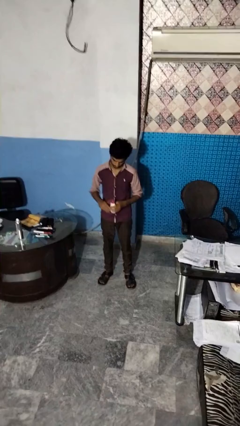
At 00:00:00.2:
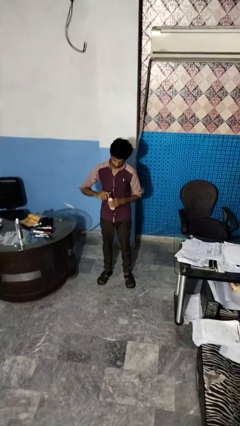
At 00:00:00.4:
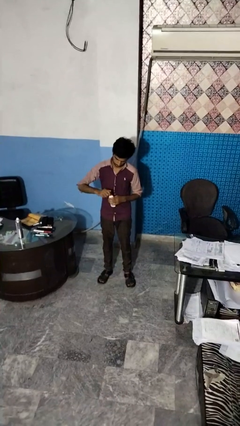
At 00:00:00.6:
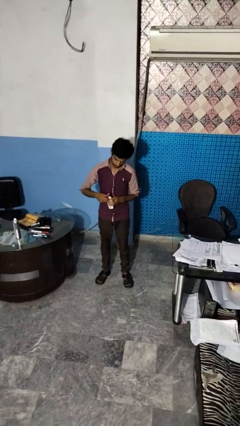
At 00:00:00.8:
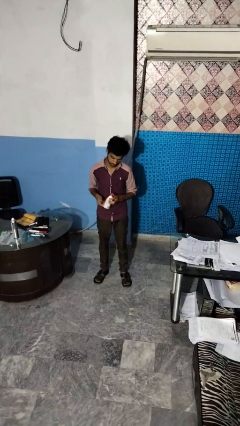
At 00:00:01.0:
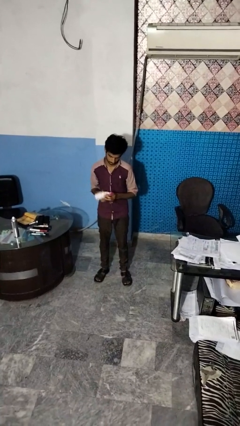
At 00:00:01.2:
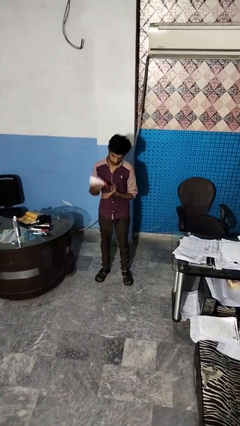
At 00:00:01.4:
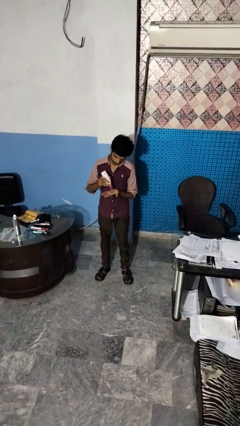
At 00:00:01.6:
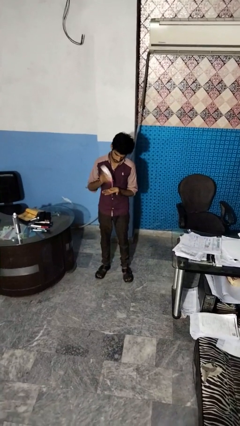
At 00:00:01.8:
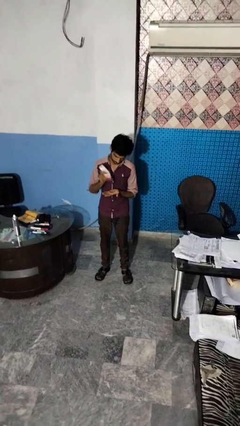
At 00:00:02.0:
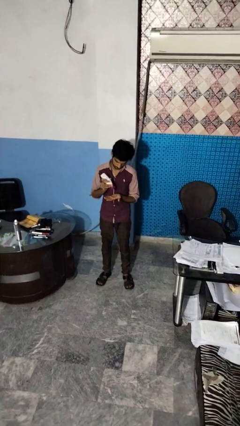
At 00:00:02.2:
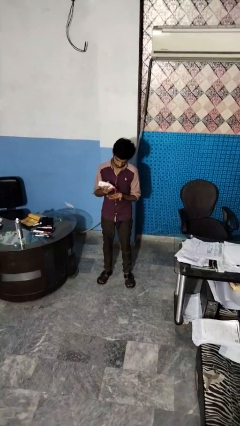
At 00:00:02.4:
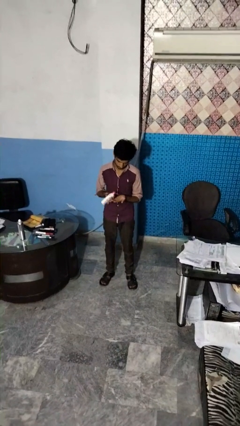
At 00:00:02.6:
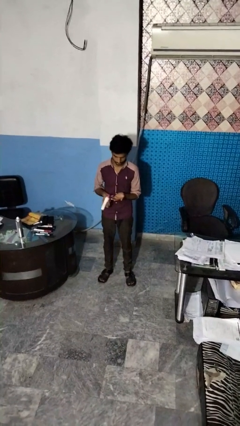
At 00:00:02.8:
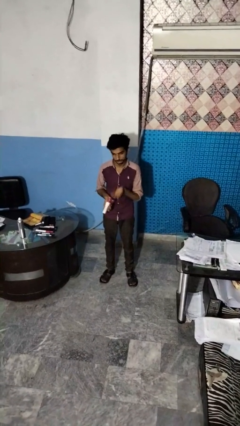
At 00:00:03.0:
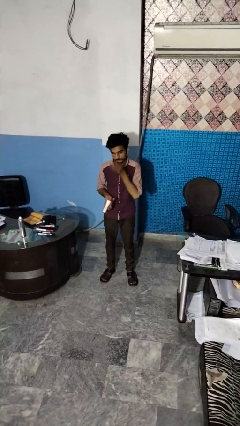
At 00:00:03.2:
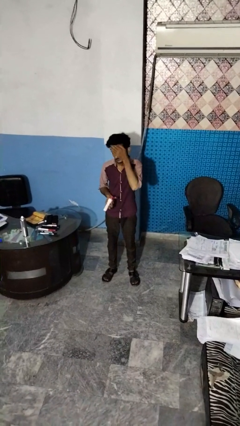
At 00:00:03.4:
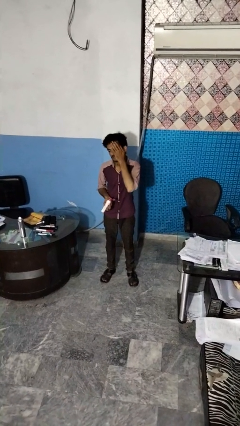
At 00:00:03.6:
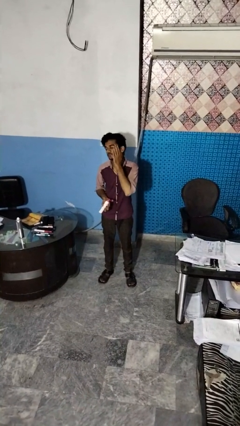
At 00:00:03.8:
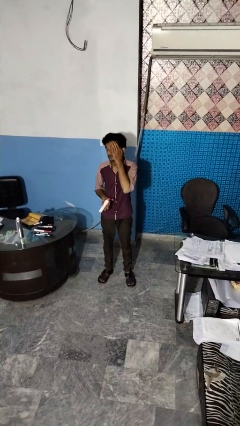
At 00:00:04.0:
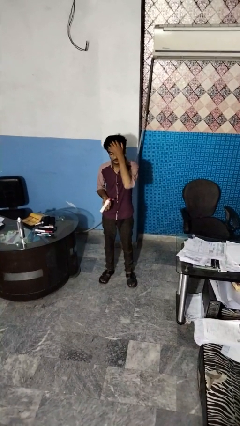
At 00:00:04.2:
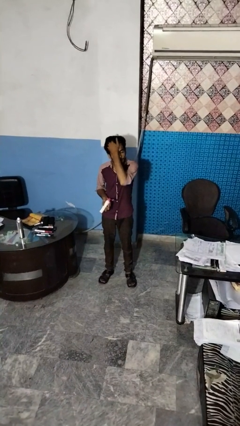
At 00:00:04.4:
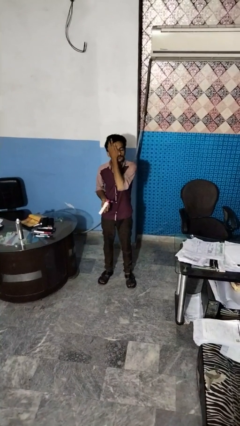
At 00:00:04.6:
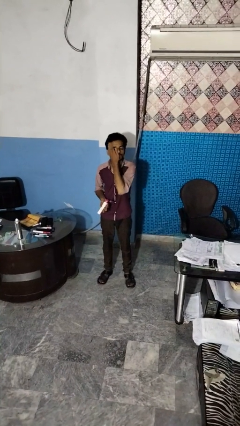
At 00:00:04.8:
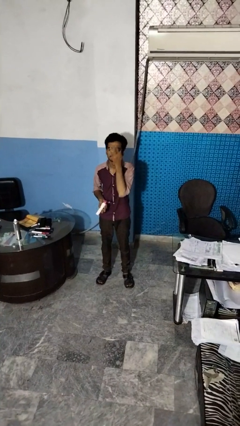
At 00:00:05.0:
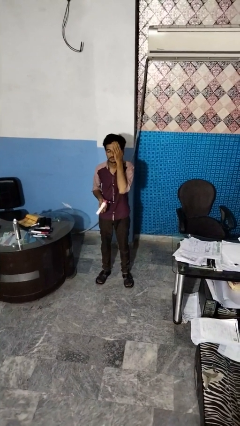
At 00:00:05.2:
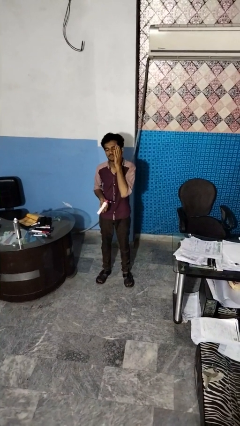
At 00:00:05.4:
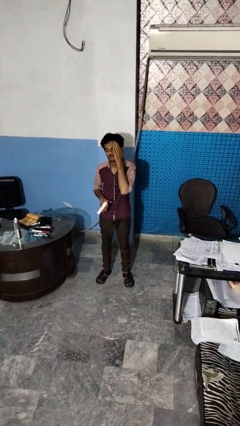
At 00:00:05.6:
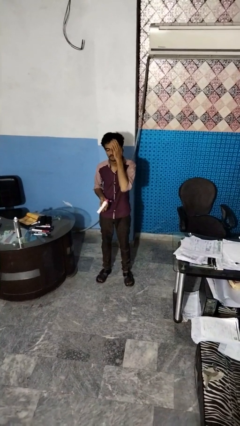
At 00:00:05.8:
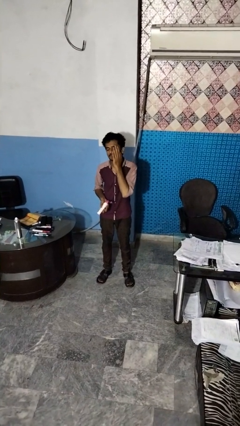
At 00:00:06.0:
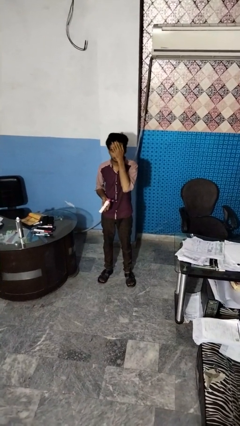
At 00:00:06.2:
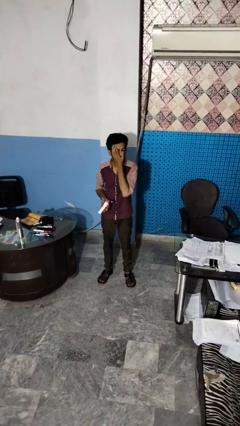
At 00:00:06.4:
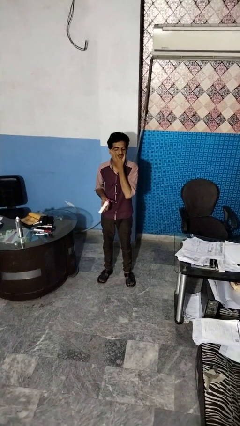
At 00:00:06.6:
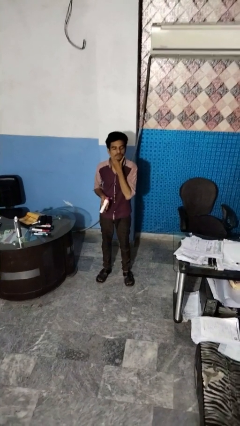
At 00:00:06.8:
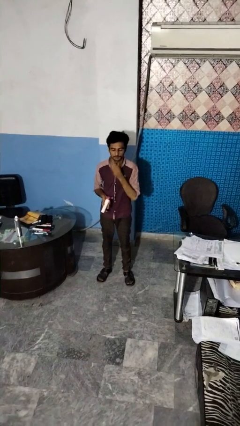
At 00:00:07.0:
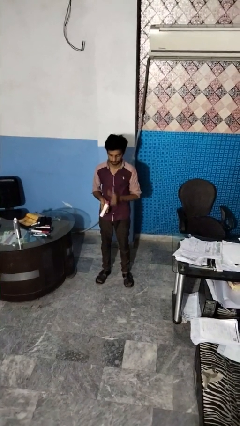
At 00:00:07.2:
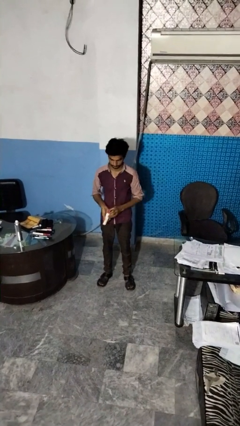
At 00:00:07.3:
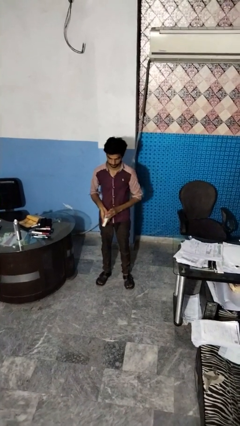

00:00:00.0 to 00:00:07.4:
person applies facial moisturizer

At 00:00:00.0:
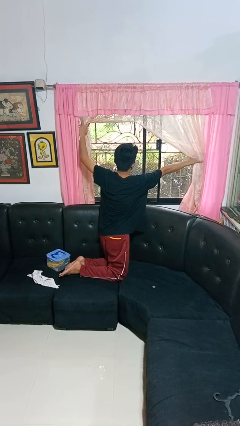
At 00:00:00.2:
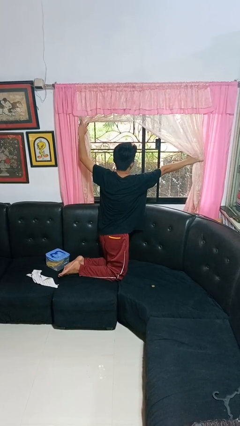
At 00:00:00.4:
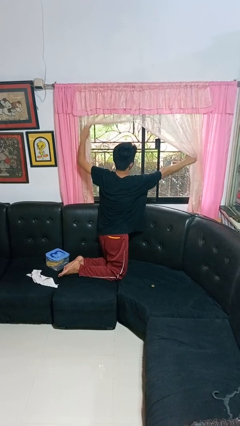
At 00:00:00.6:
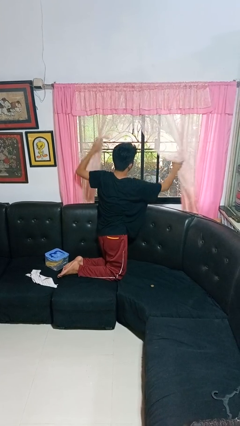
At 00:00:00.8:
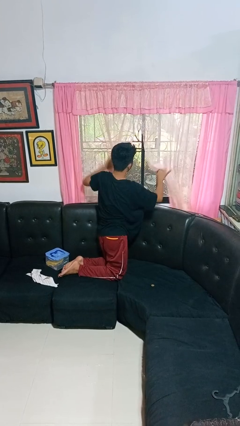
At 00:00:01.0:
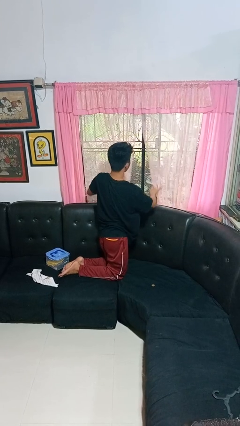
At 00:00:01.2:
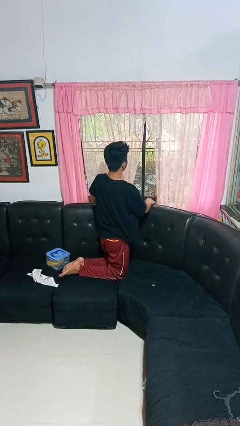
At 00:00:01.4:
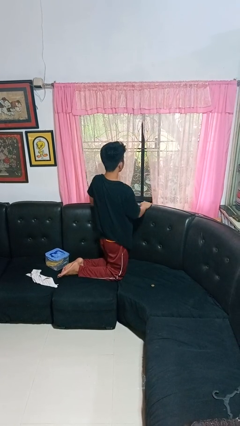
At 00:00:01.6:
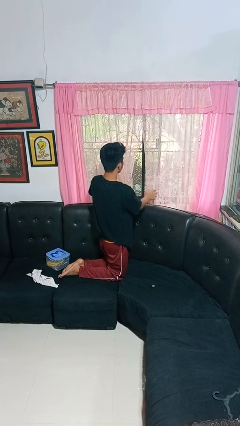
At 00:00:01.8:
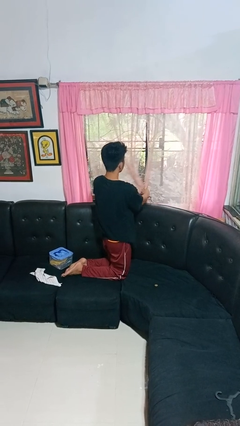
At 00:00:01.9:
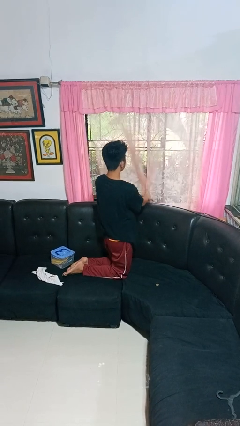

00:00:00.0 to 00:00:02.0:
person closes curtains

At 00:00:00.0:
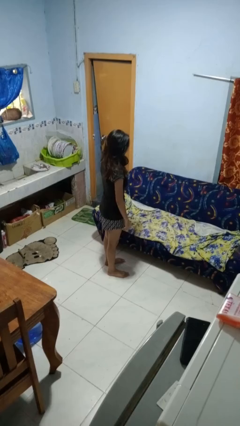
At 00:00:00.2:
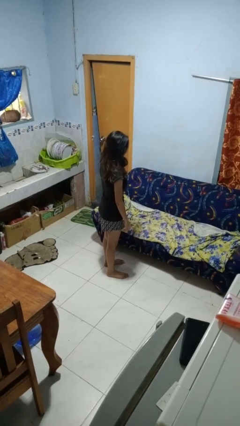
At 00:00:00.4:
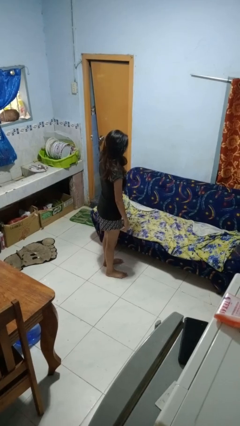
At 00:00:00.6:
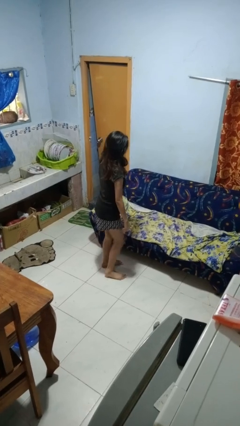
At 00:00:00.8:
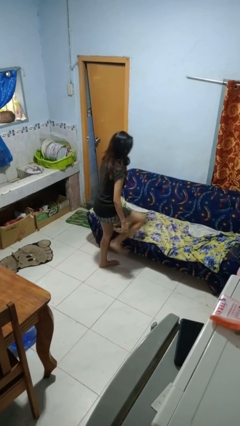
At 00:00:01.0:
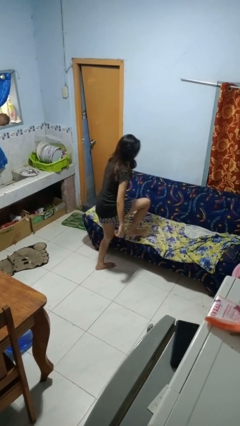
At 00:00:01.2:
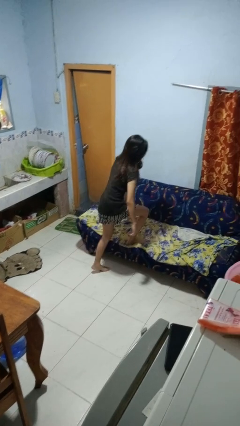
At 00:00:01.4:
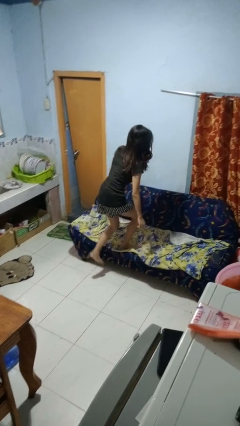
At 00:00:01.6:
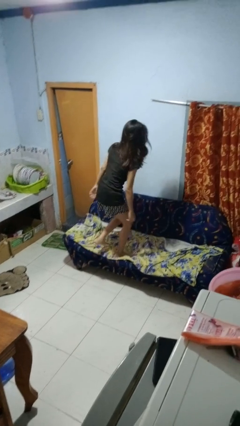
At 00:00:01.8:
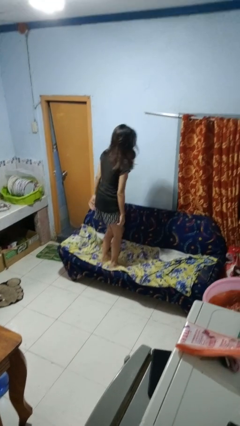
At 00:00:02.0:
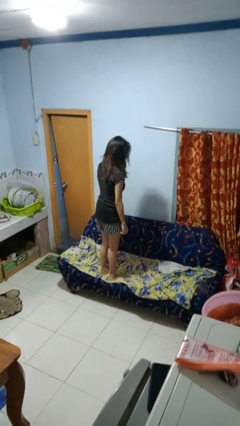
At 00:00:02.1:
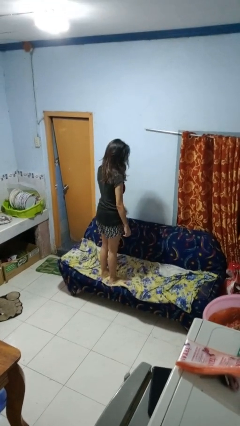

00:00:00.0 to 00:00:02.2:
person climbs on couch

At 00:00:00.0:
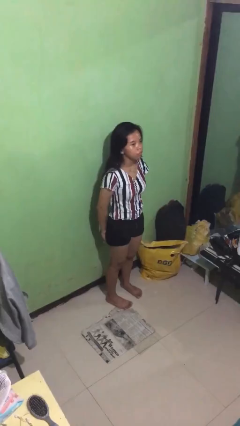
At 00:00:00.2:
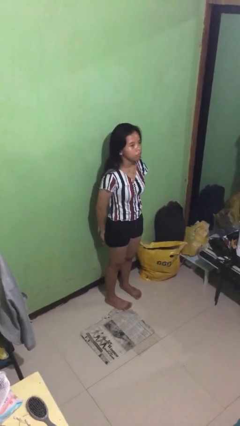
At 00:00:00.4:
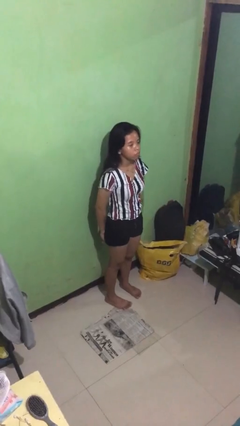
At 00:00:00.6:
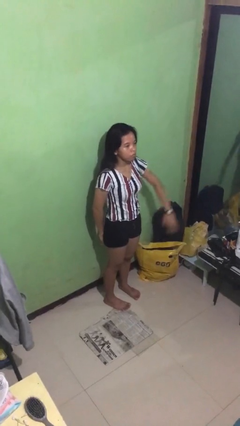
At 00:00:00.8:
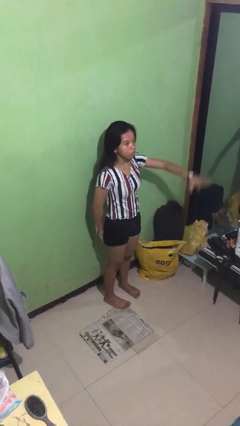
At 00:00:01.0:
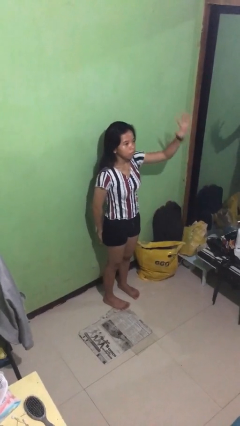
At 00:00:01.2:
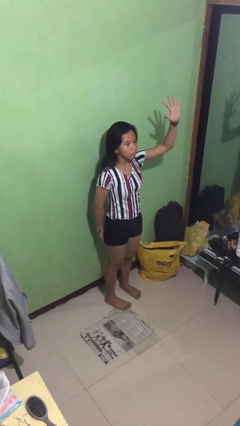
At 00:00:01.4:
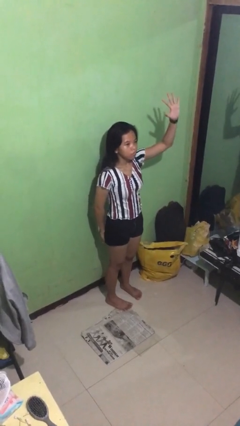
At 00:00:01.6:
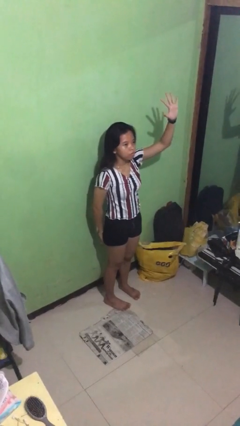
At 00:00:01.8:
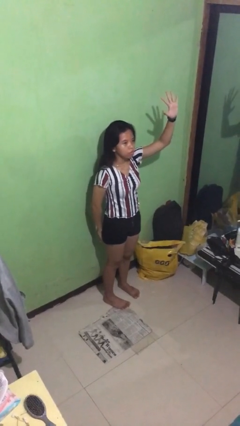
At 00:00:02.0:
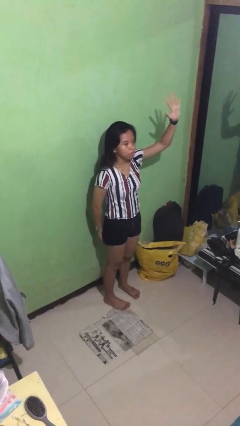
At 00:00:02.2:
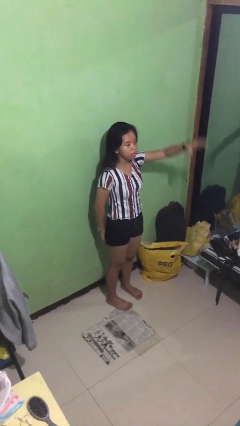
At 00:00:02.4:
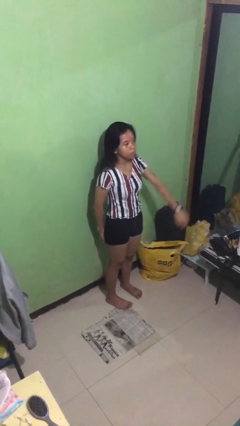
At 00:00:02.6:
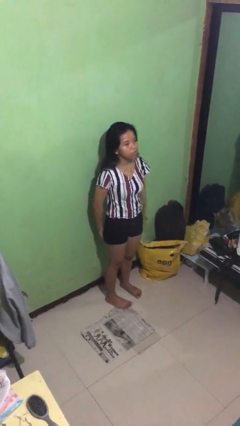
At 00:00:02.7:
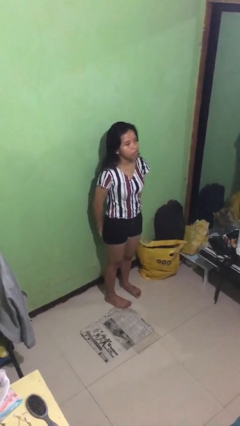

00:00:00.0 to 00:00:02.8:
person gestures number five

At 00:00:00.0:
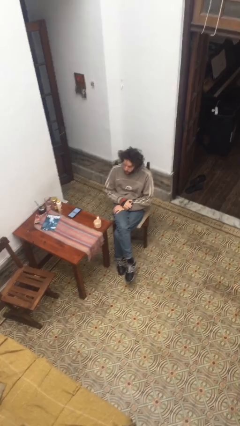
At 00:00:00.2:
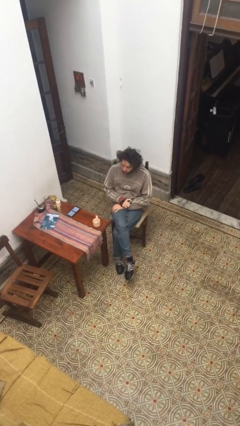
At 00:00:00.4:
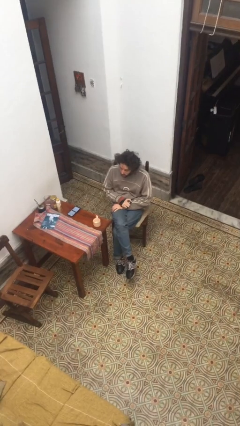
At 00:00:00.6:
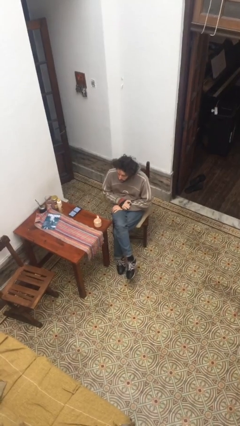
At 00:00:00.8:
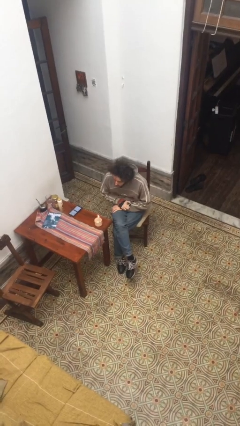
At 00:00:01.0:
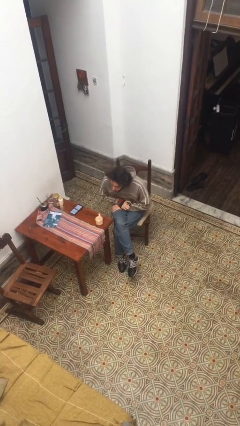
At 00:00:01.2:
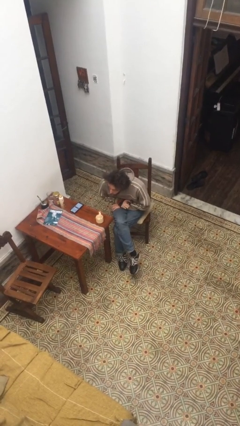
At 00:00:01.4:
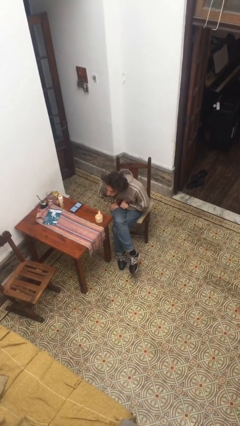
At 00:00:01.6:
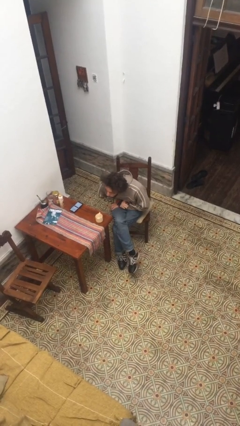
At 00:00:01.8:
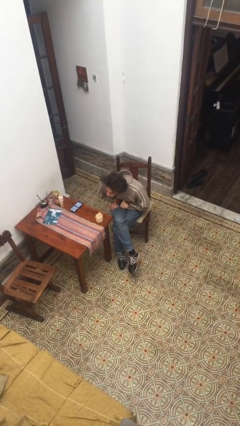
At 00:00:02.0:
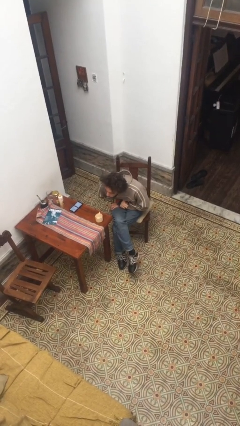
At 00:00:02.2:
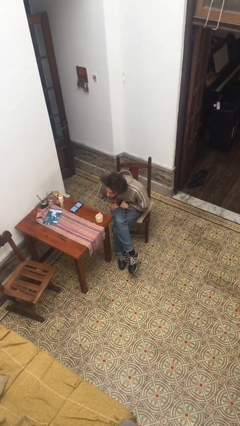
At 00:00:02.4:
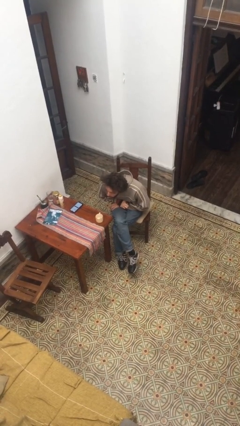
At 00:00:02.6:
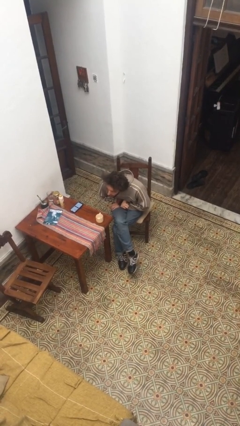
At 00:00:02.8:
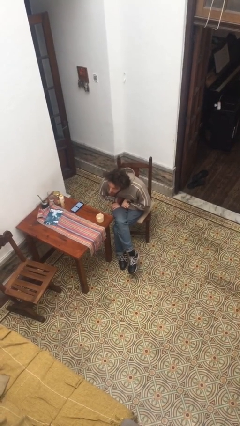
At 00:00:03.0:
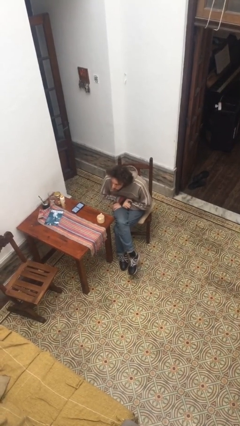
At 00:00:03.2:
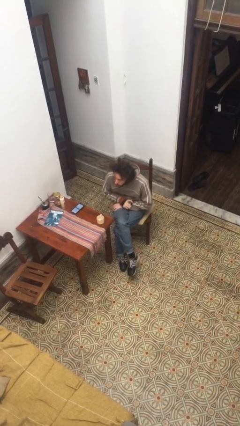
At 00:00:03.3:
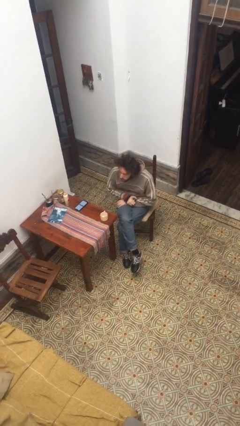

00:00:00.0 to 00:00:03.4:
person extinguishes candle
